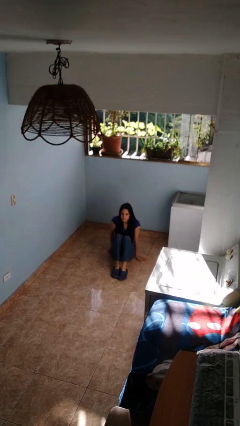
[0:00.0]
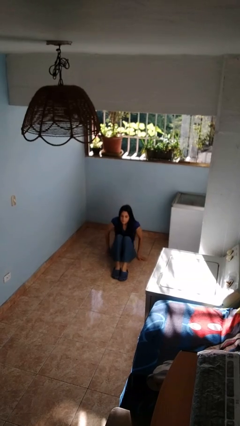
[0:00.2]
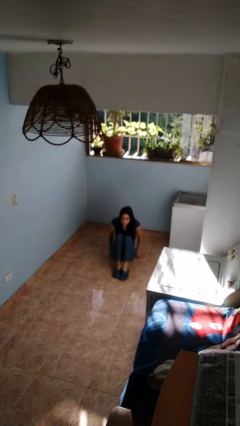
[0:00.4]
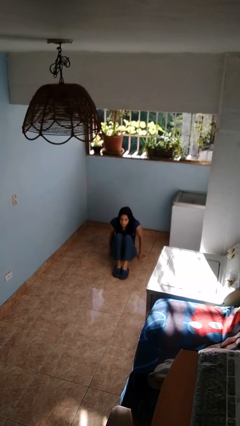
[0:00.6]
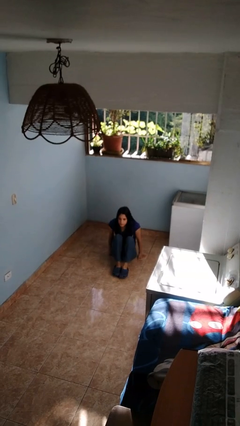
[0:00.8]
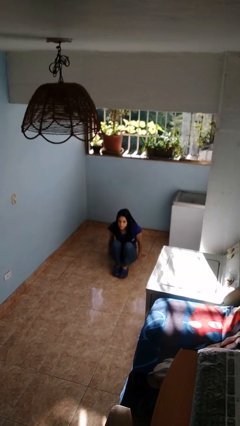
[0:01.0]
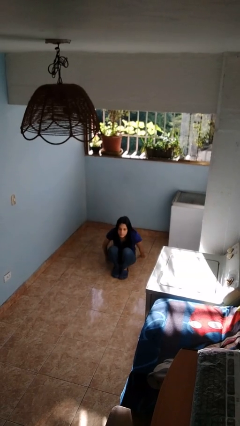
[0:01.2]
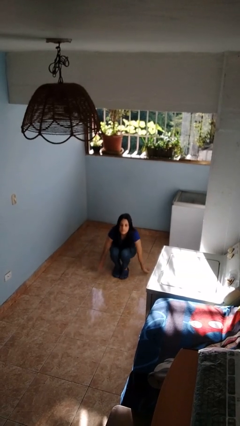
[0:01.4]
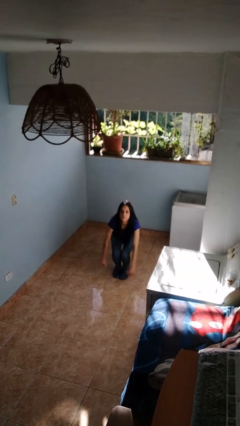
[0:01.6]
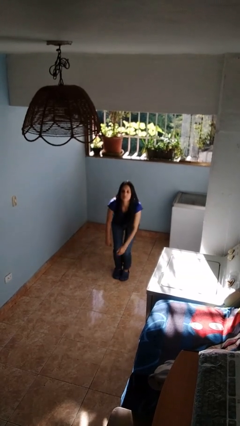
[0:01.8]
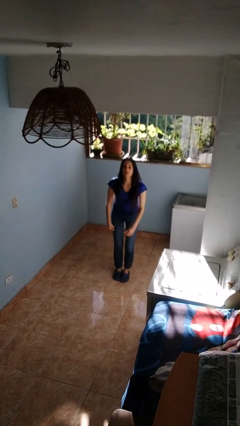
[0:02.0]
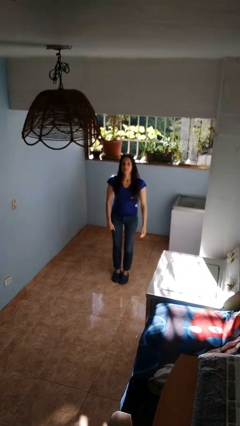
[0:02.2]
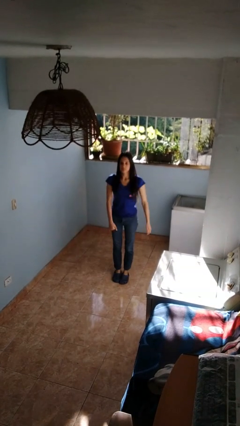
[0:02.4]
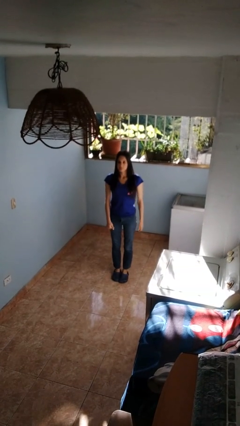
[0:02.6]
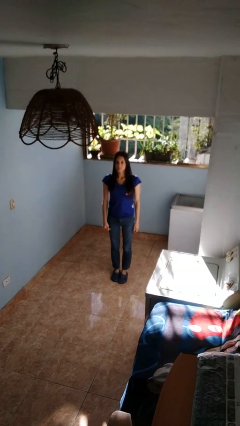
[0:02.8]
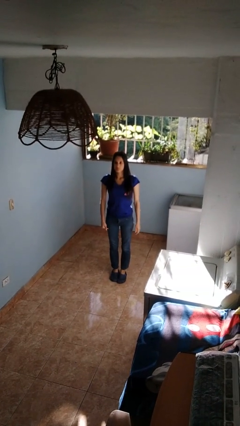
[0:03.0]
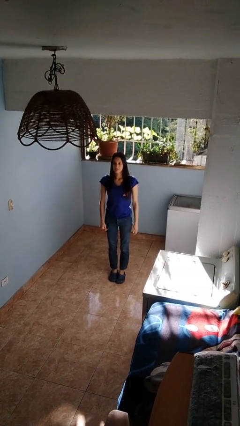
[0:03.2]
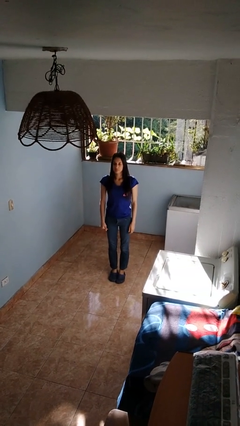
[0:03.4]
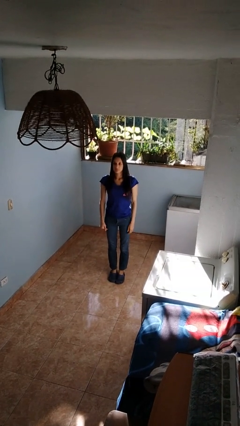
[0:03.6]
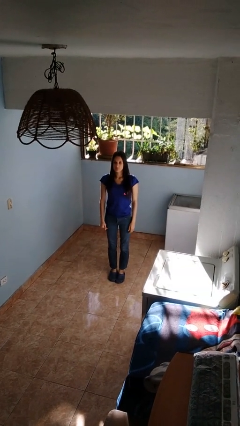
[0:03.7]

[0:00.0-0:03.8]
person stands up from floor

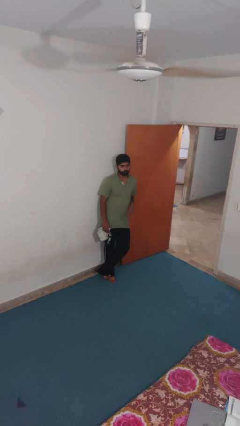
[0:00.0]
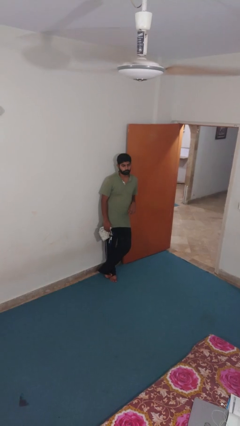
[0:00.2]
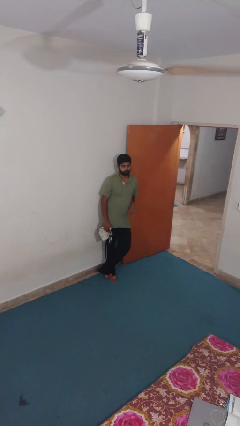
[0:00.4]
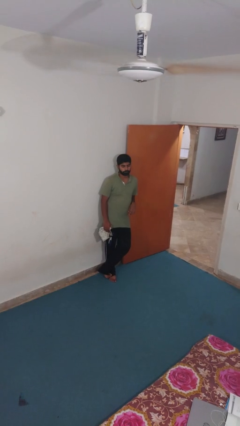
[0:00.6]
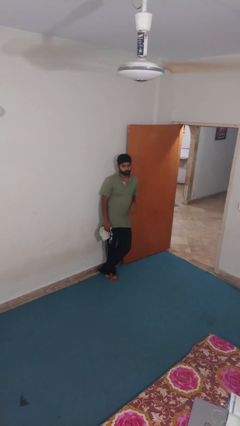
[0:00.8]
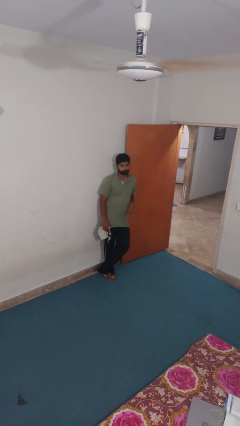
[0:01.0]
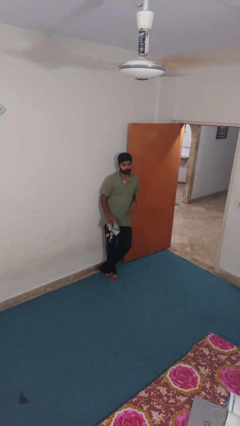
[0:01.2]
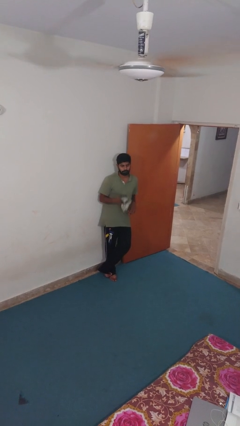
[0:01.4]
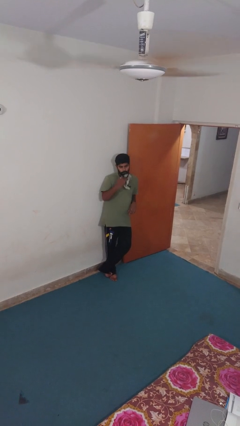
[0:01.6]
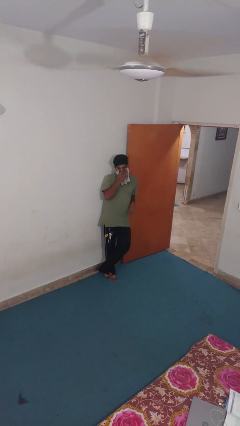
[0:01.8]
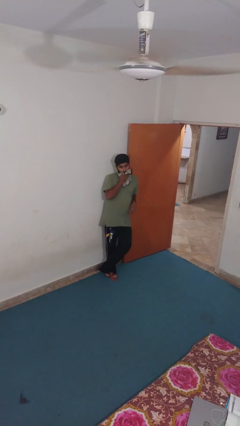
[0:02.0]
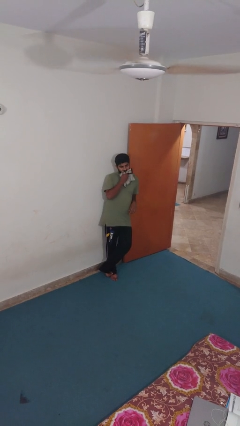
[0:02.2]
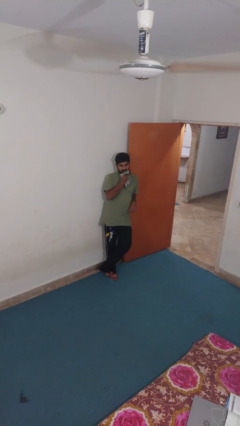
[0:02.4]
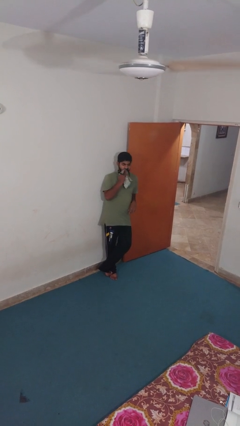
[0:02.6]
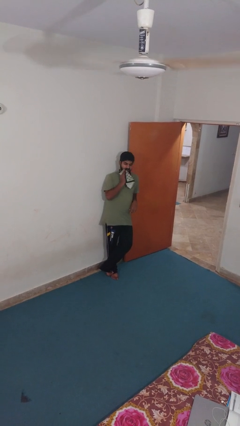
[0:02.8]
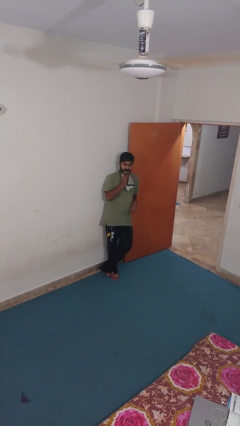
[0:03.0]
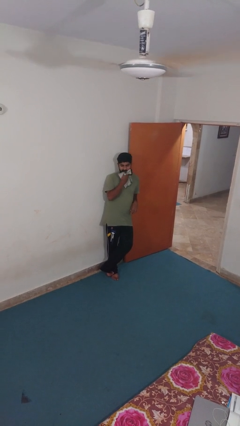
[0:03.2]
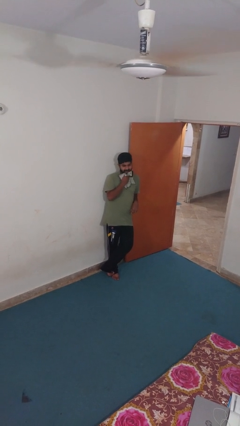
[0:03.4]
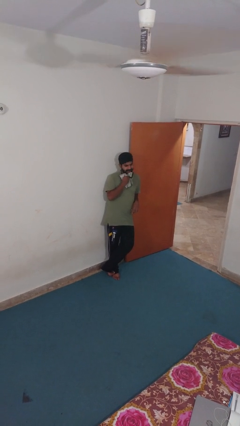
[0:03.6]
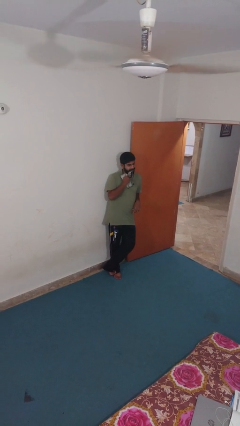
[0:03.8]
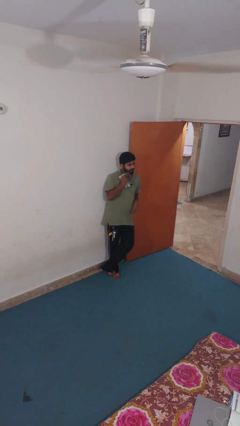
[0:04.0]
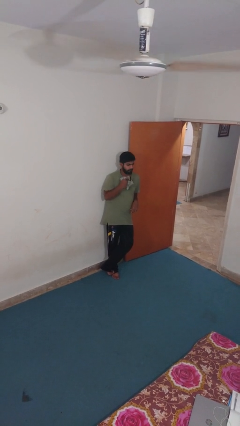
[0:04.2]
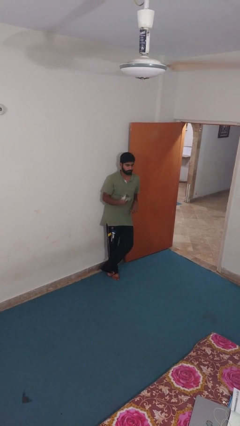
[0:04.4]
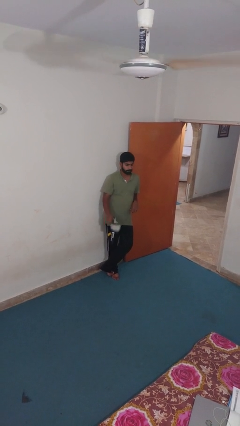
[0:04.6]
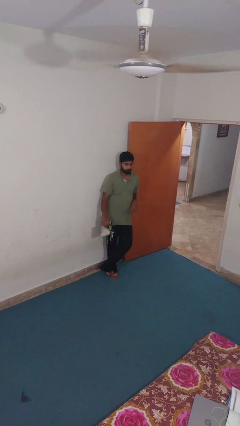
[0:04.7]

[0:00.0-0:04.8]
person wipes mouth with napkin

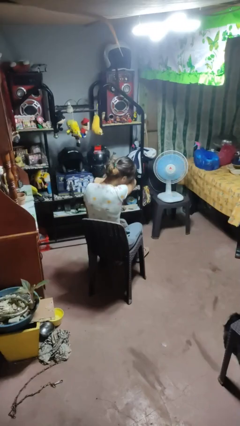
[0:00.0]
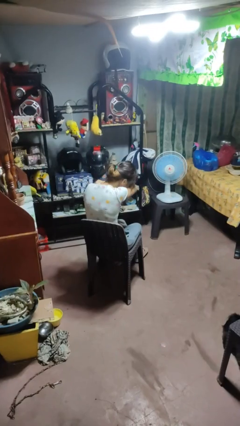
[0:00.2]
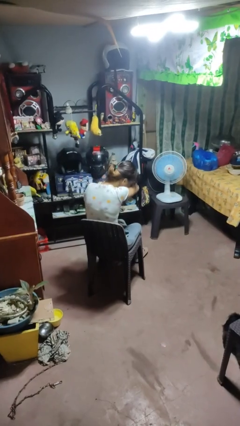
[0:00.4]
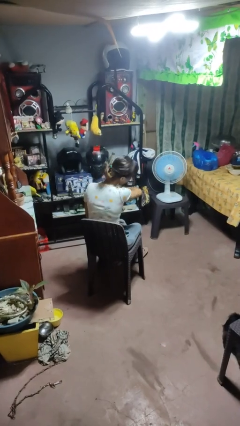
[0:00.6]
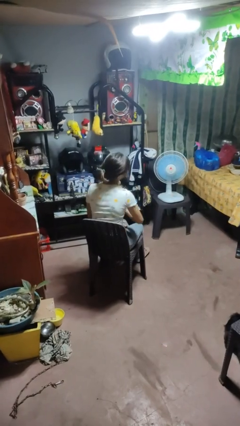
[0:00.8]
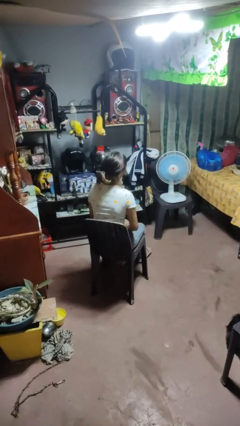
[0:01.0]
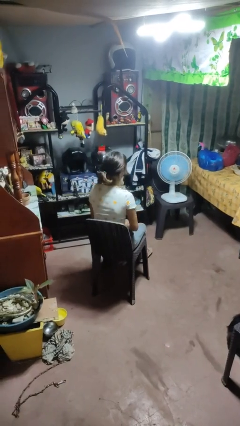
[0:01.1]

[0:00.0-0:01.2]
person sneezes into arm

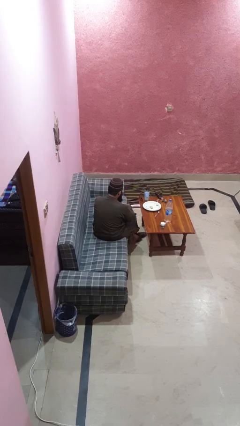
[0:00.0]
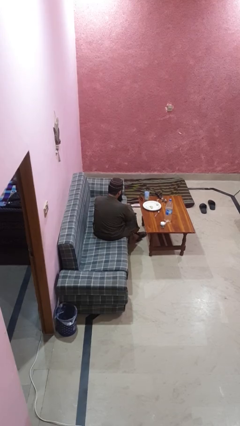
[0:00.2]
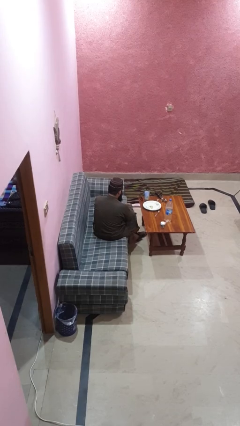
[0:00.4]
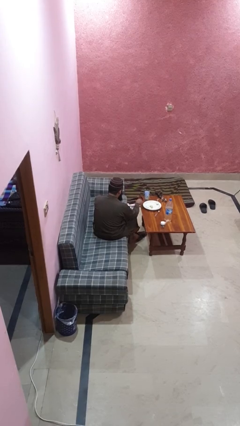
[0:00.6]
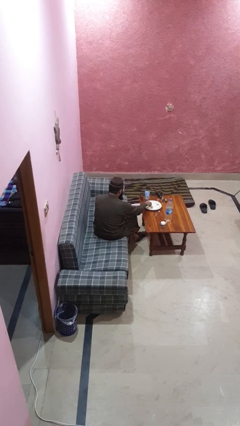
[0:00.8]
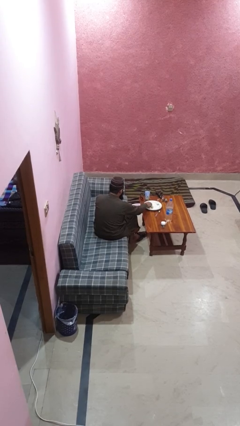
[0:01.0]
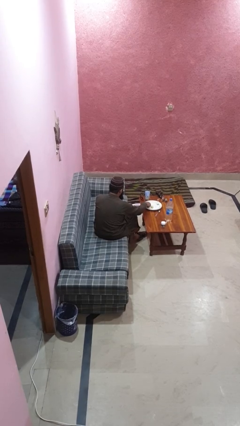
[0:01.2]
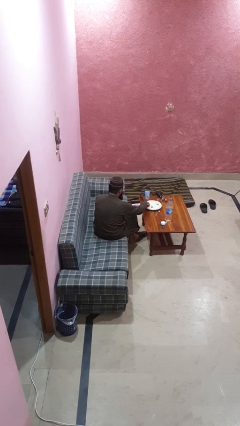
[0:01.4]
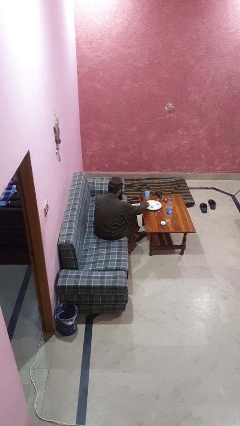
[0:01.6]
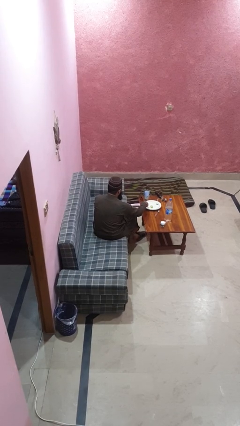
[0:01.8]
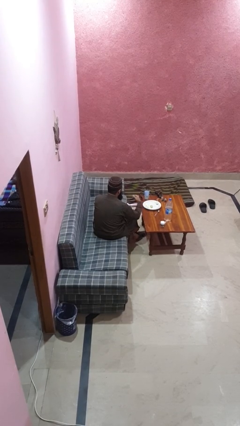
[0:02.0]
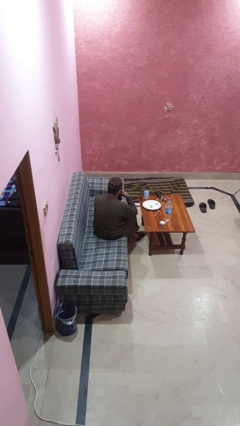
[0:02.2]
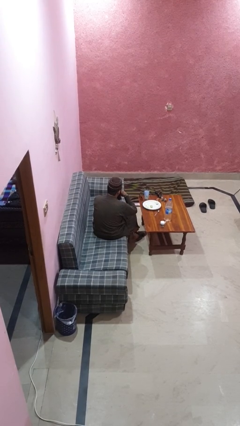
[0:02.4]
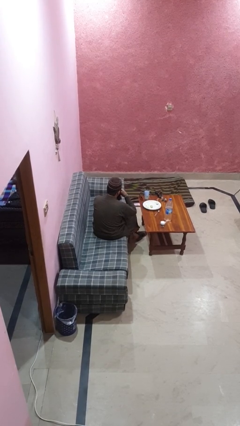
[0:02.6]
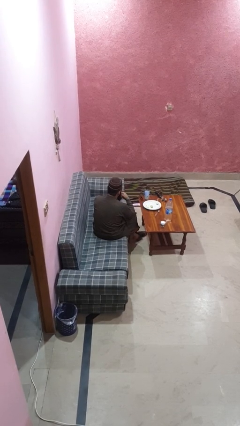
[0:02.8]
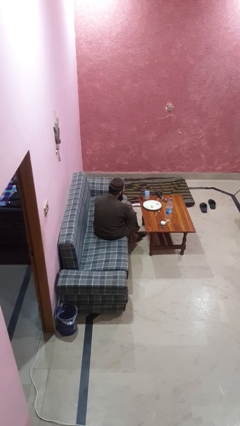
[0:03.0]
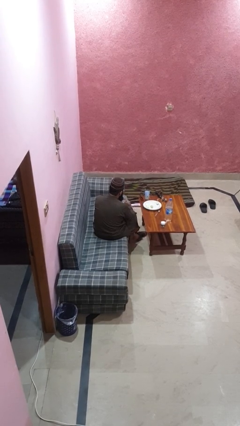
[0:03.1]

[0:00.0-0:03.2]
person eats with hands

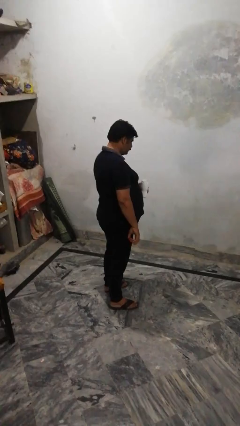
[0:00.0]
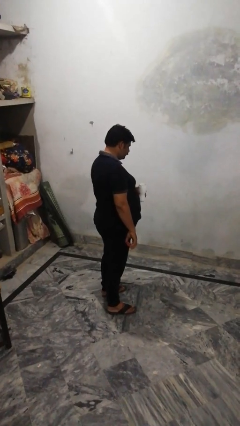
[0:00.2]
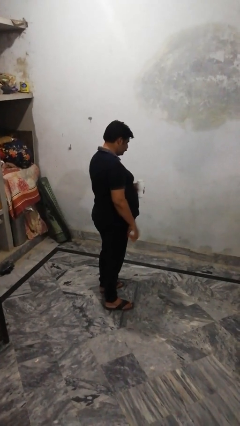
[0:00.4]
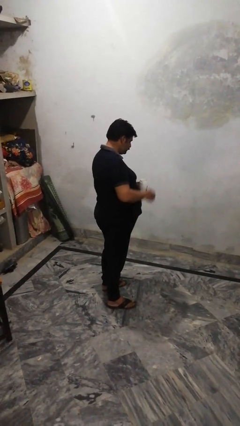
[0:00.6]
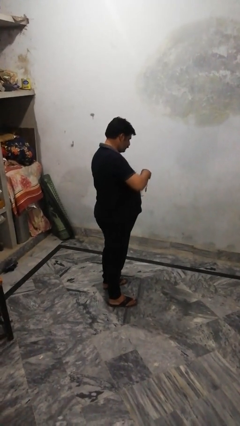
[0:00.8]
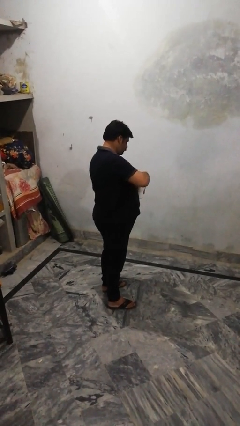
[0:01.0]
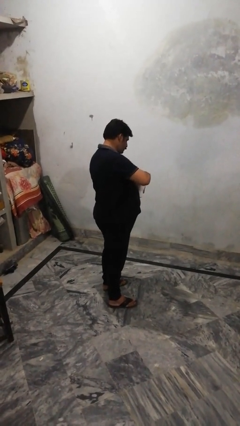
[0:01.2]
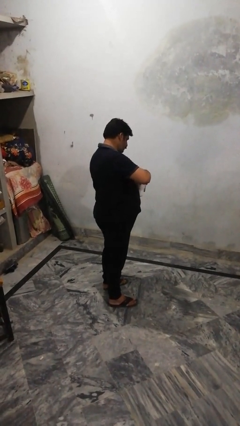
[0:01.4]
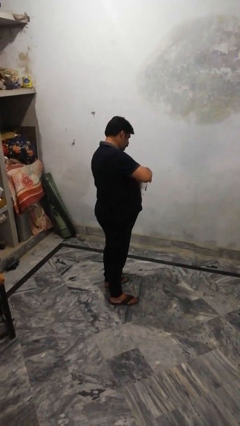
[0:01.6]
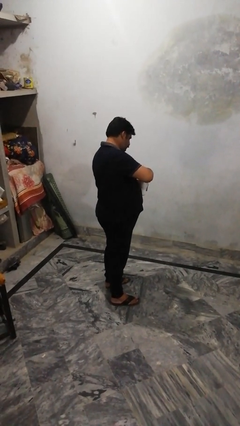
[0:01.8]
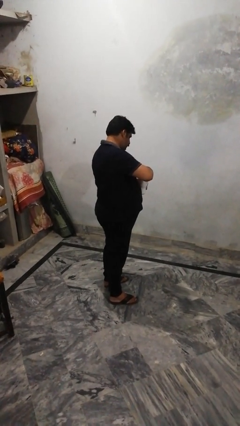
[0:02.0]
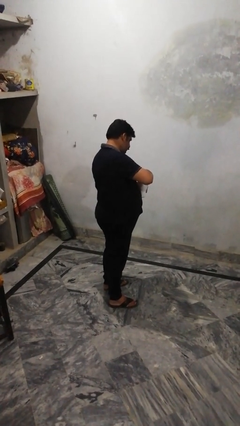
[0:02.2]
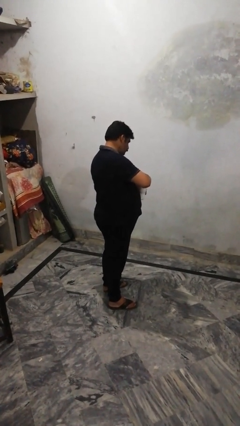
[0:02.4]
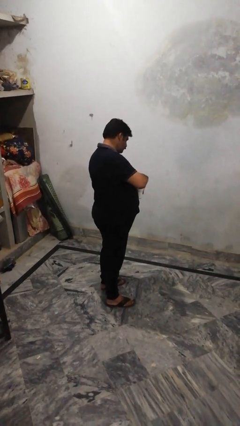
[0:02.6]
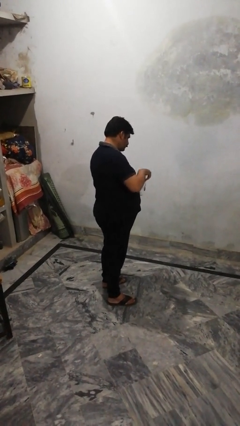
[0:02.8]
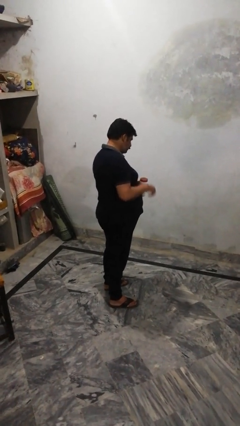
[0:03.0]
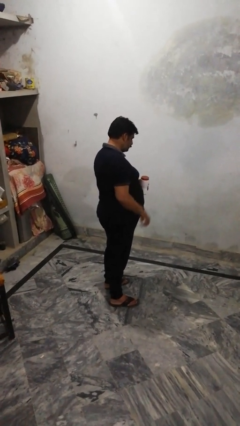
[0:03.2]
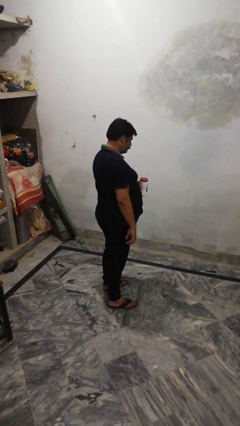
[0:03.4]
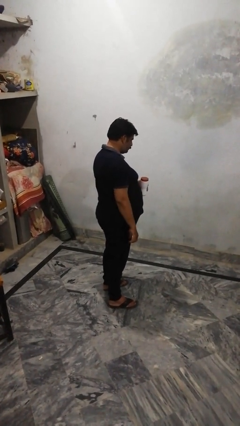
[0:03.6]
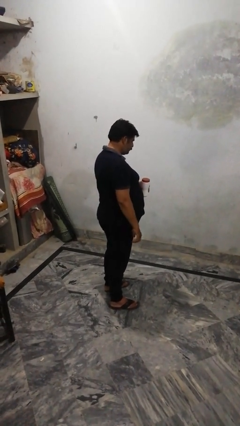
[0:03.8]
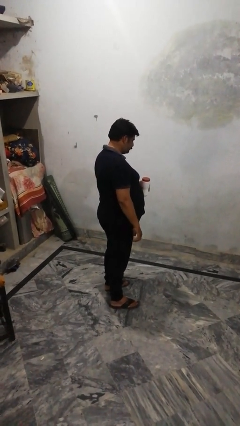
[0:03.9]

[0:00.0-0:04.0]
person closes jar

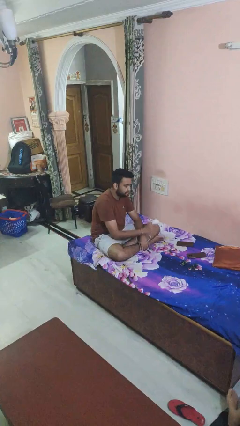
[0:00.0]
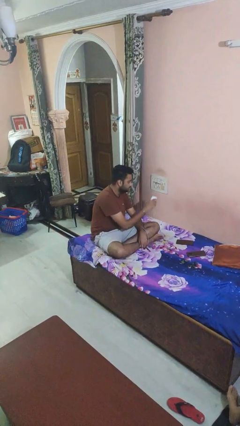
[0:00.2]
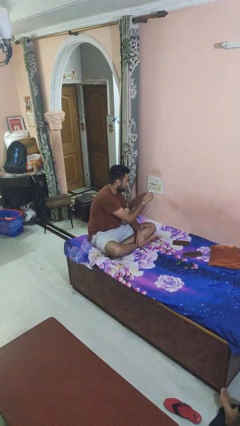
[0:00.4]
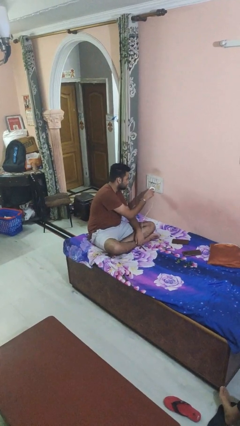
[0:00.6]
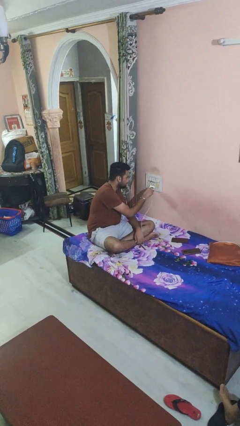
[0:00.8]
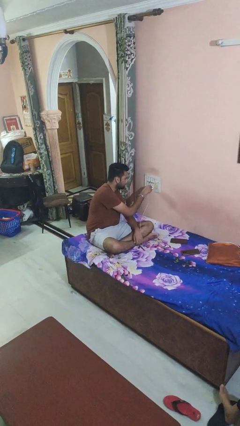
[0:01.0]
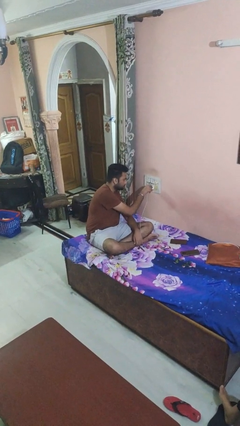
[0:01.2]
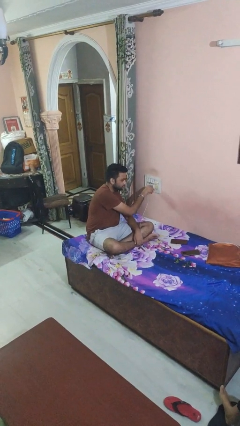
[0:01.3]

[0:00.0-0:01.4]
person plugs into electrical socket
